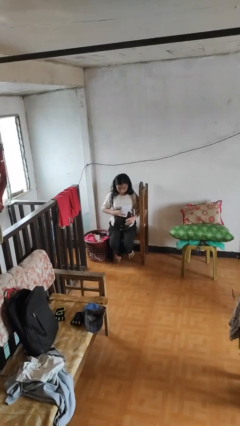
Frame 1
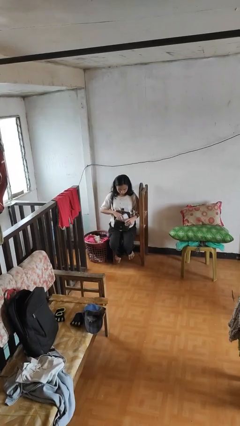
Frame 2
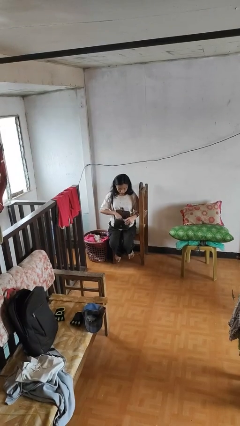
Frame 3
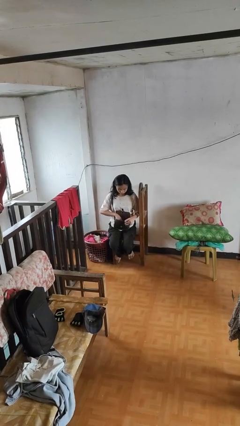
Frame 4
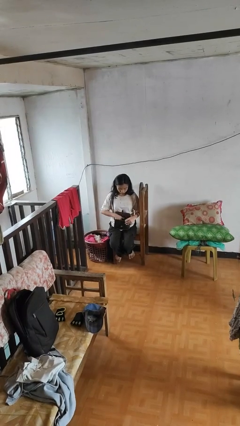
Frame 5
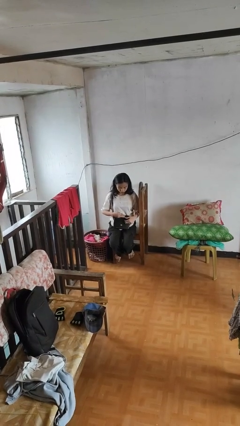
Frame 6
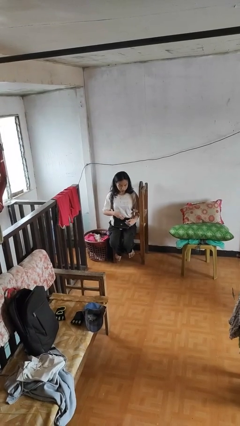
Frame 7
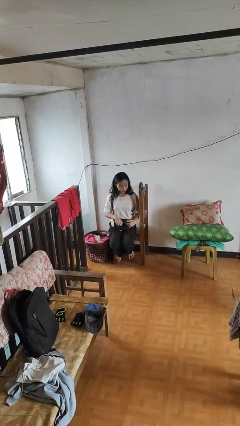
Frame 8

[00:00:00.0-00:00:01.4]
person puts object into purse

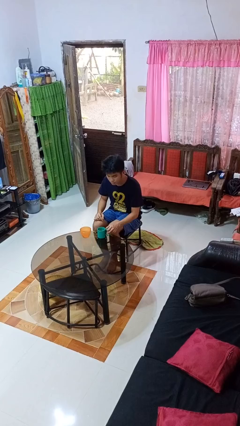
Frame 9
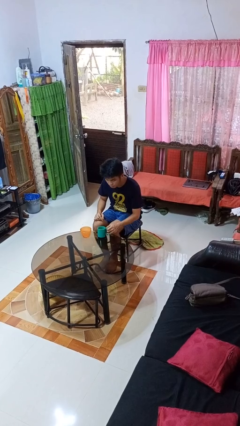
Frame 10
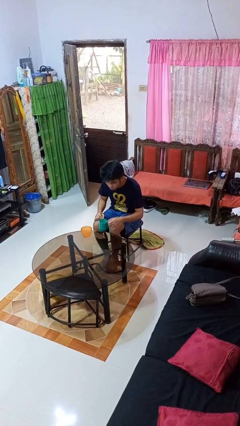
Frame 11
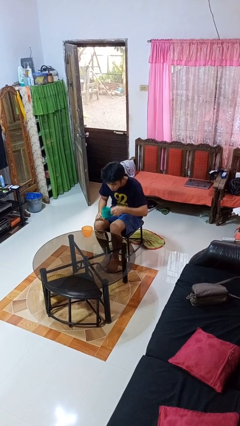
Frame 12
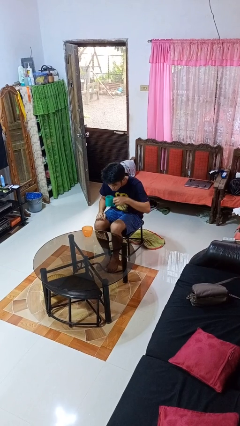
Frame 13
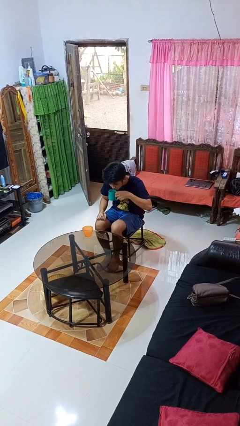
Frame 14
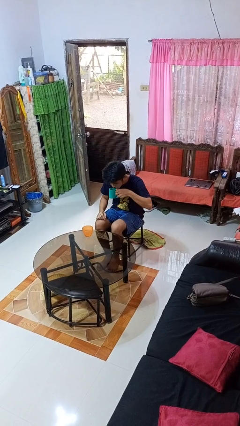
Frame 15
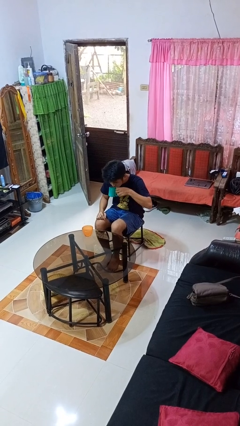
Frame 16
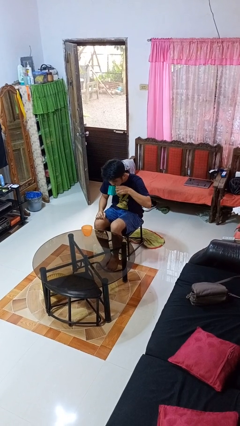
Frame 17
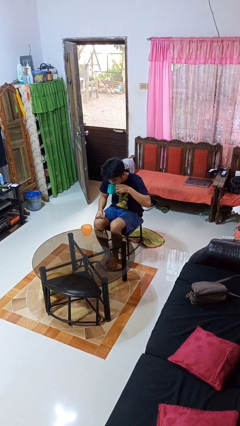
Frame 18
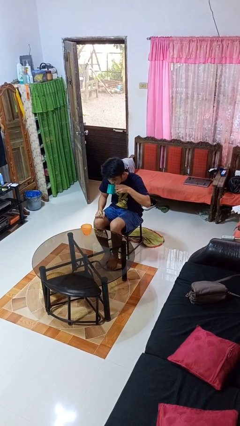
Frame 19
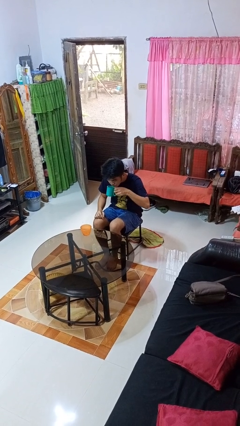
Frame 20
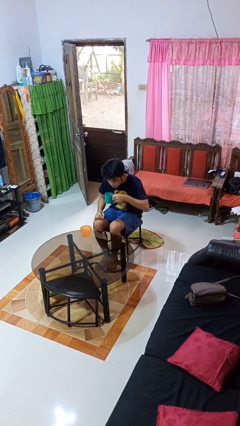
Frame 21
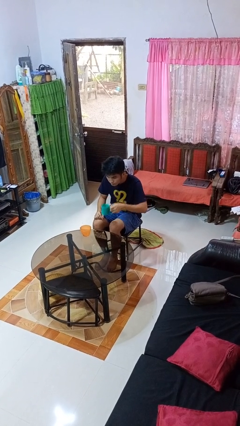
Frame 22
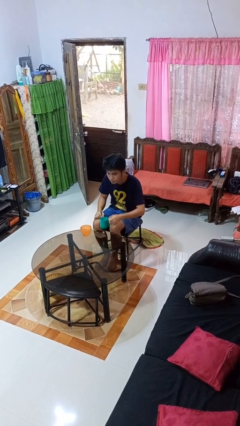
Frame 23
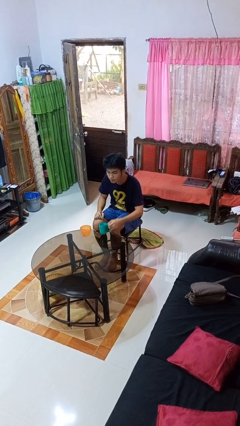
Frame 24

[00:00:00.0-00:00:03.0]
person drinks from cup

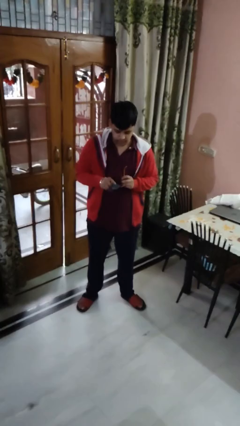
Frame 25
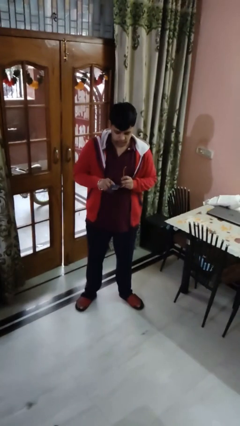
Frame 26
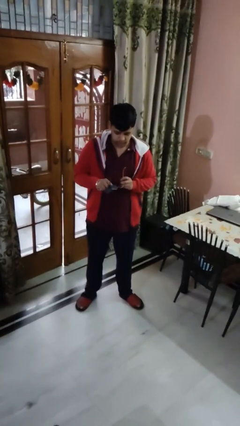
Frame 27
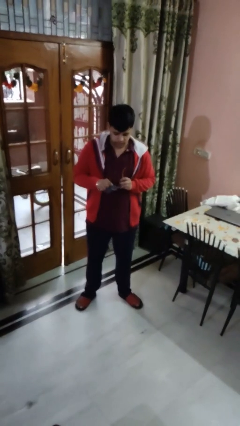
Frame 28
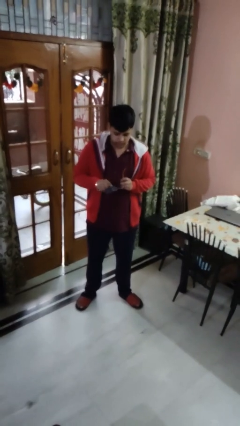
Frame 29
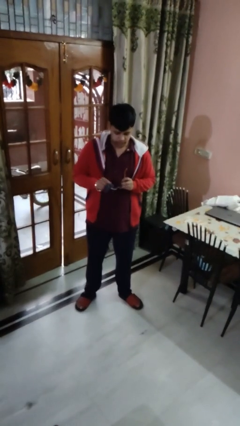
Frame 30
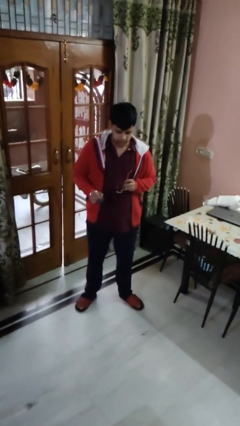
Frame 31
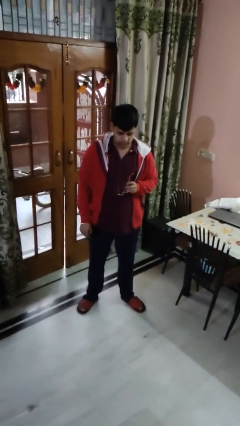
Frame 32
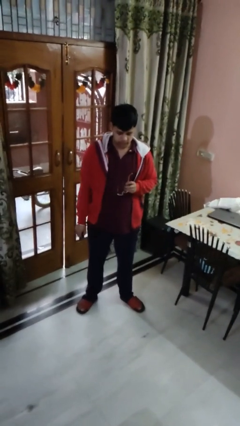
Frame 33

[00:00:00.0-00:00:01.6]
person cleans eyeglasses

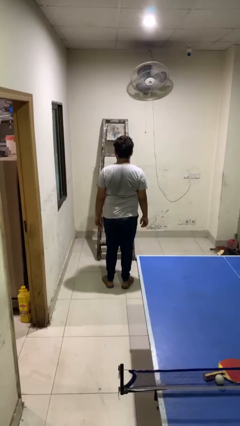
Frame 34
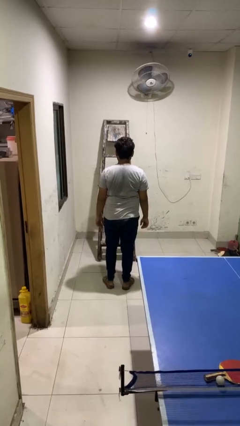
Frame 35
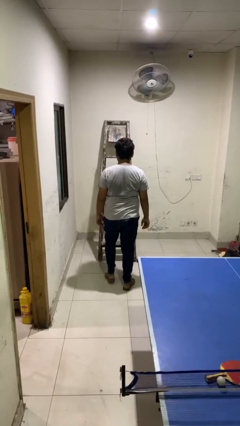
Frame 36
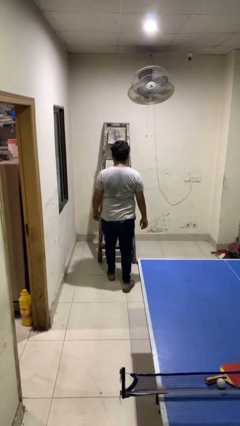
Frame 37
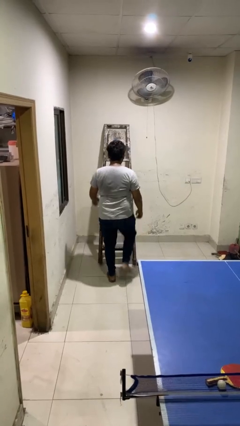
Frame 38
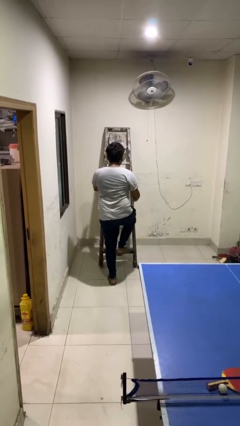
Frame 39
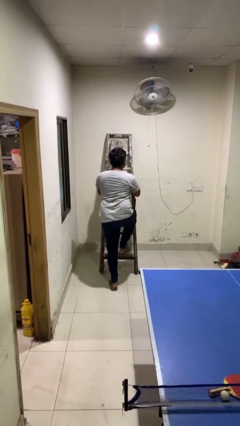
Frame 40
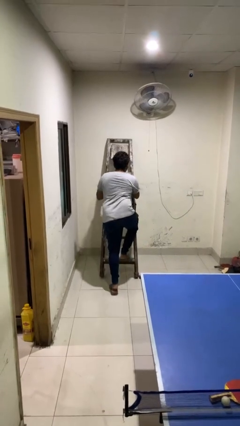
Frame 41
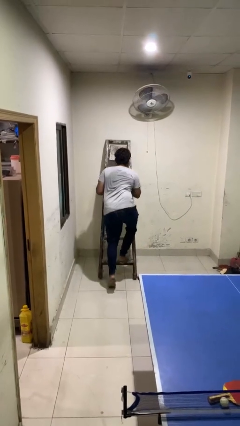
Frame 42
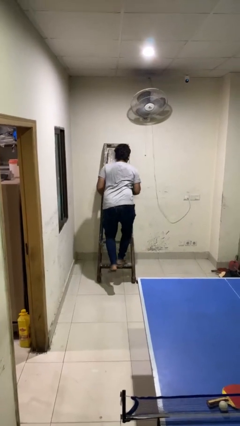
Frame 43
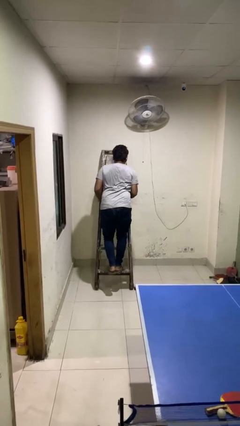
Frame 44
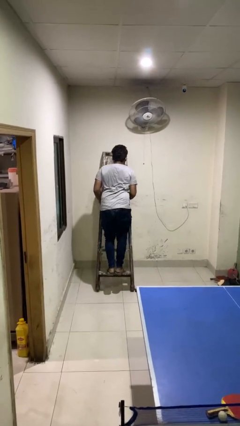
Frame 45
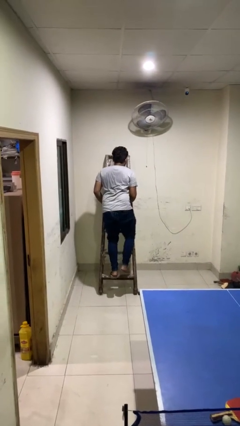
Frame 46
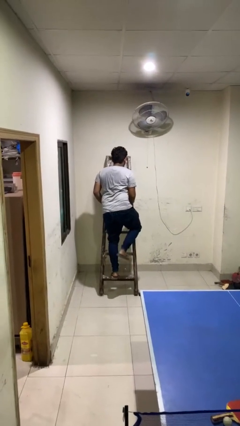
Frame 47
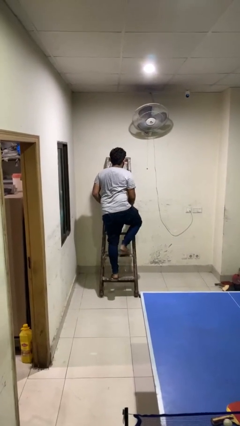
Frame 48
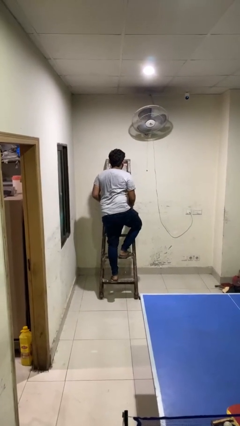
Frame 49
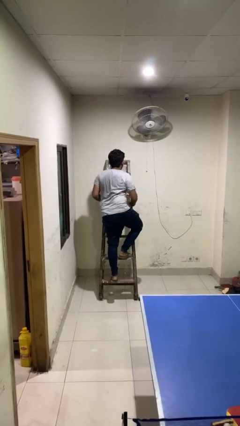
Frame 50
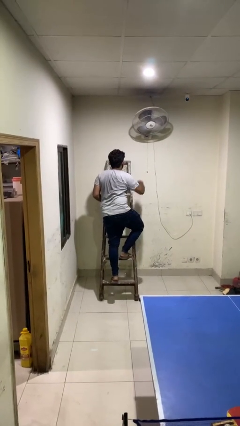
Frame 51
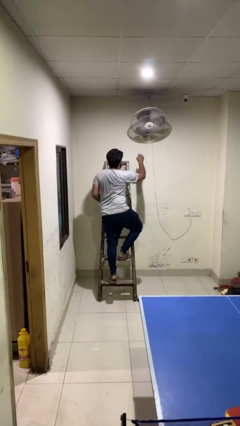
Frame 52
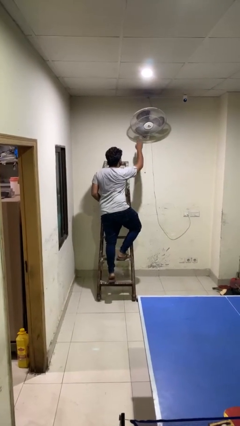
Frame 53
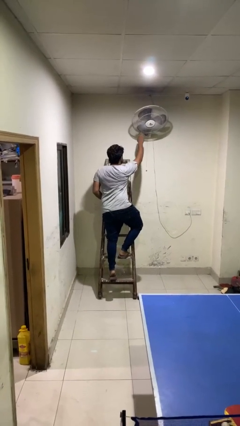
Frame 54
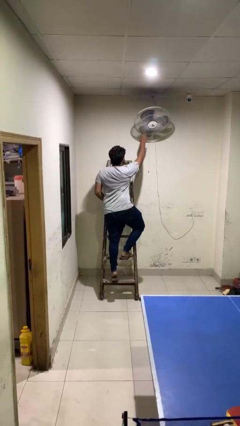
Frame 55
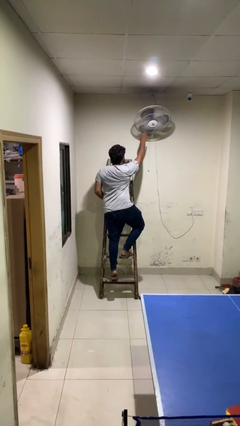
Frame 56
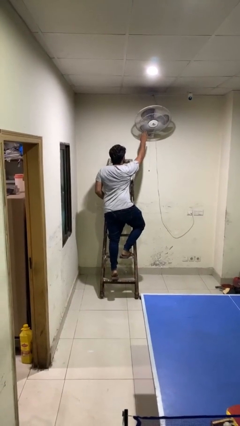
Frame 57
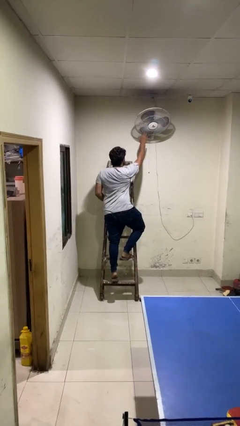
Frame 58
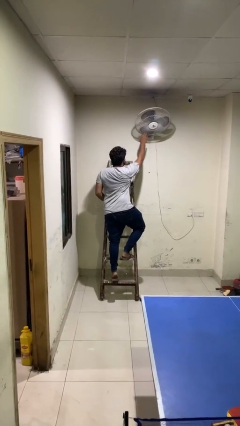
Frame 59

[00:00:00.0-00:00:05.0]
person climbs up ladder

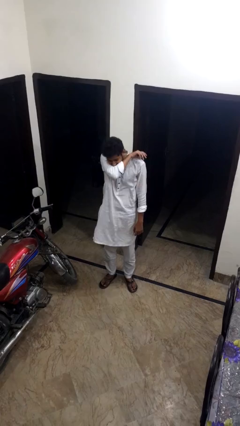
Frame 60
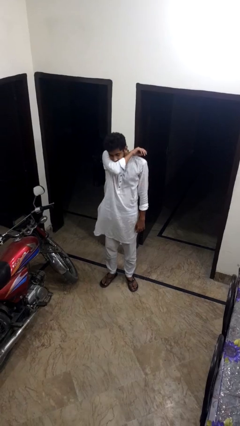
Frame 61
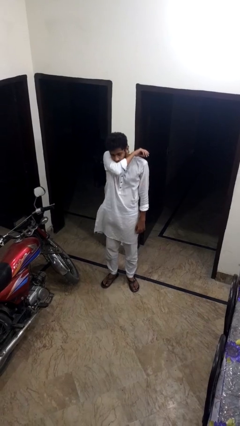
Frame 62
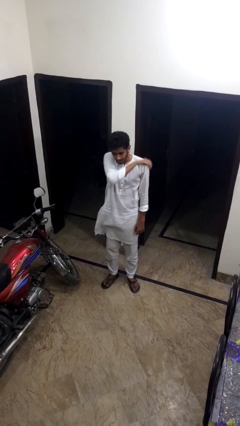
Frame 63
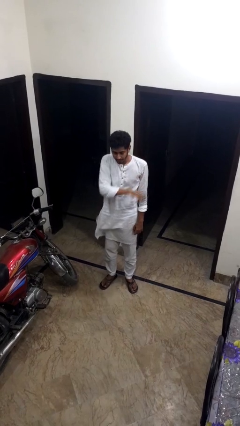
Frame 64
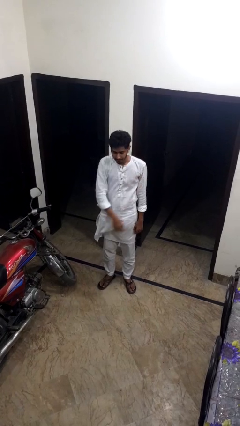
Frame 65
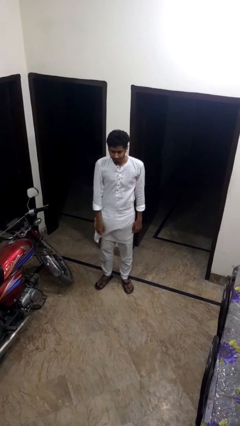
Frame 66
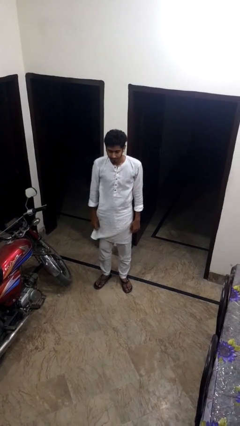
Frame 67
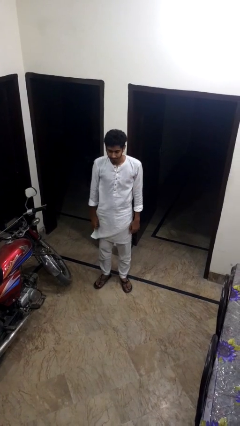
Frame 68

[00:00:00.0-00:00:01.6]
person sneezes into arm

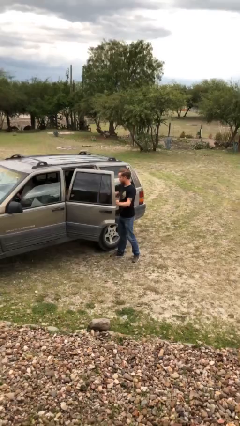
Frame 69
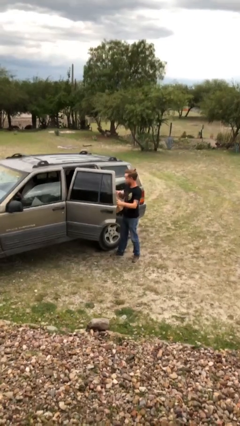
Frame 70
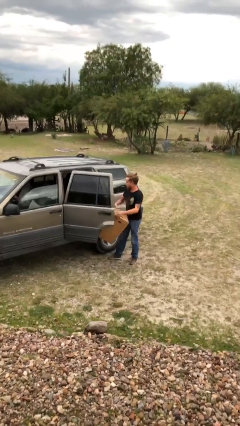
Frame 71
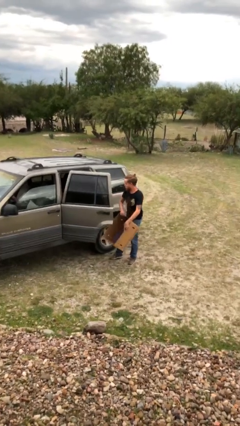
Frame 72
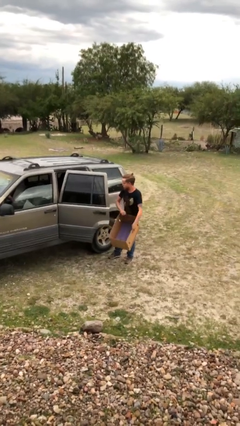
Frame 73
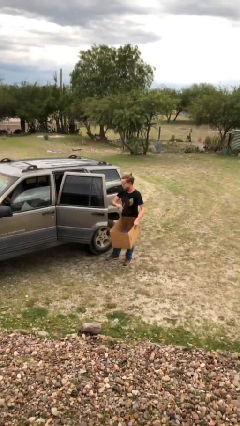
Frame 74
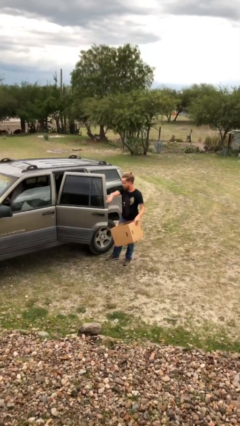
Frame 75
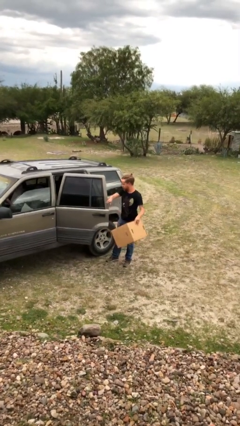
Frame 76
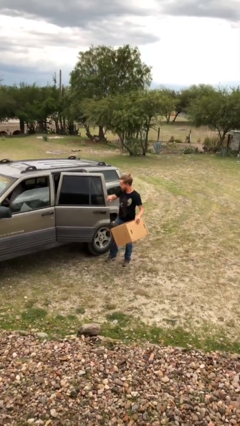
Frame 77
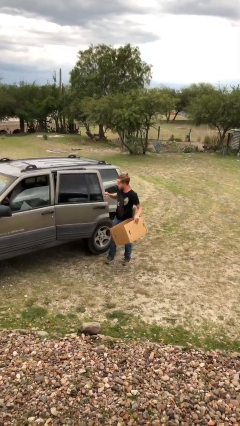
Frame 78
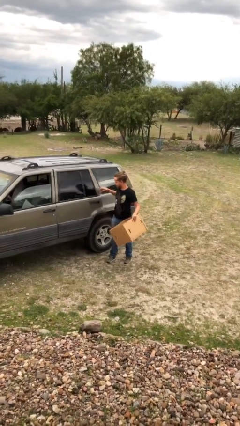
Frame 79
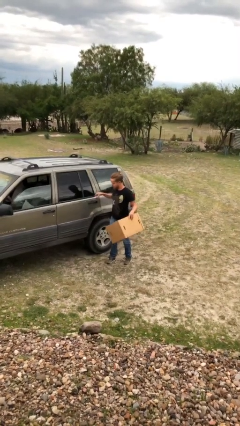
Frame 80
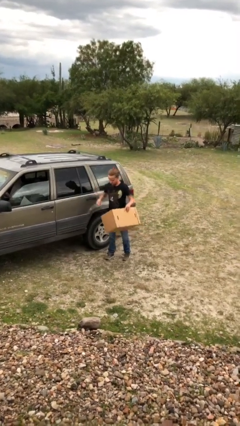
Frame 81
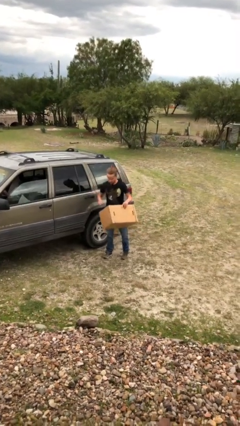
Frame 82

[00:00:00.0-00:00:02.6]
person closes car door

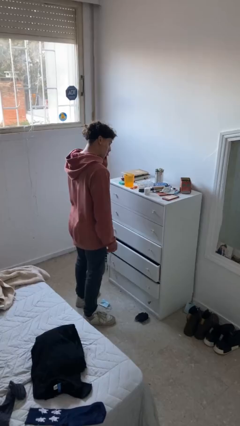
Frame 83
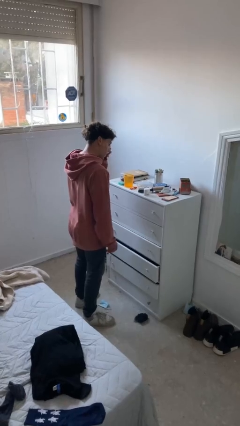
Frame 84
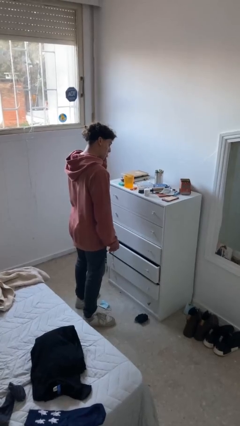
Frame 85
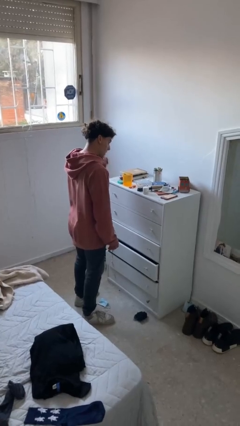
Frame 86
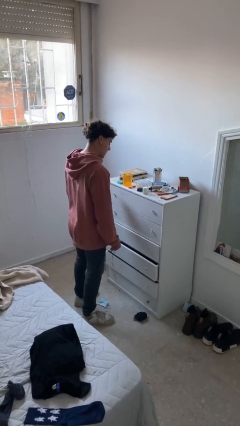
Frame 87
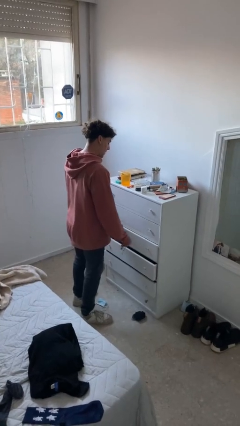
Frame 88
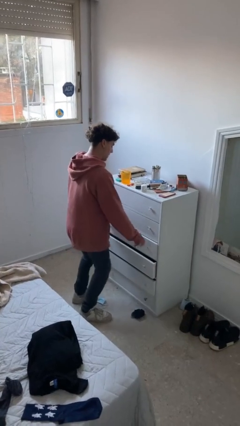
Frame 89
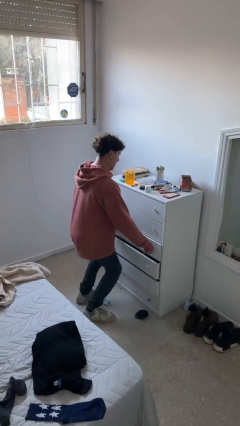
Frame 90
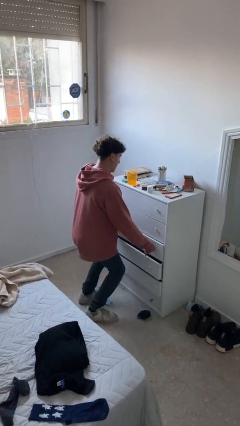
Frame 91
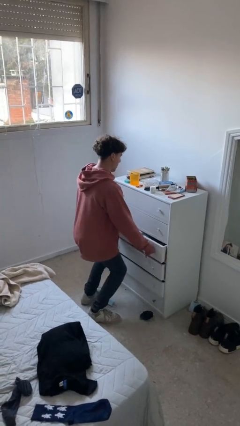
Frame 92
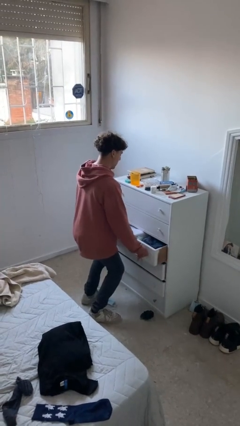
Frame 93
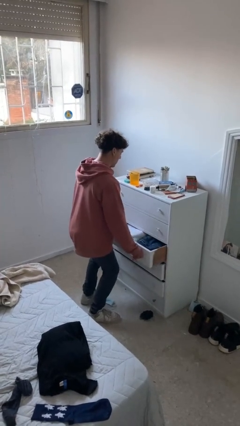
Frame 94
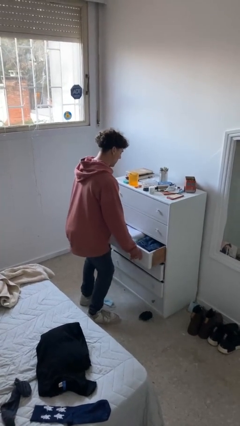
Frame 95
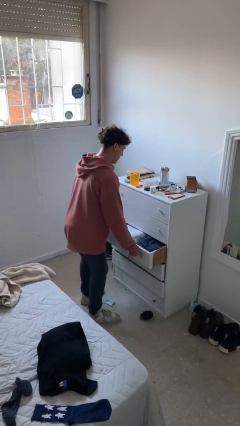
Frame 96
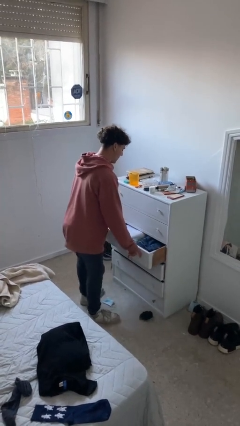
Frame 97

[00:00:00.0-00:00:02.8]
person opens dresser drawer
